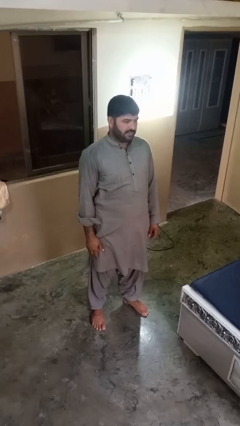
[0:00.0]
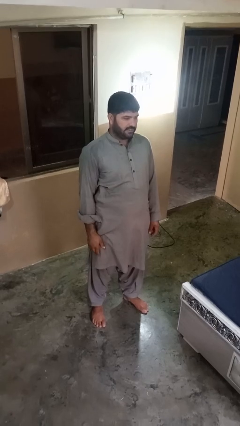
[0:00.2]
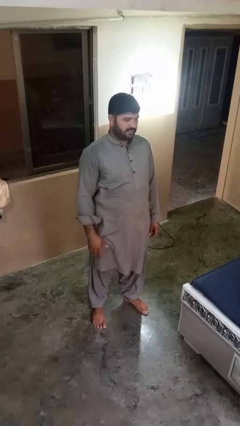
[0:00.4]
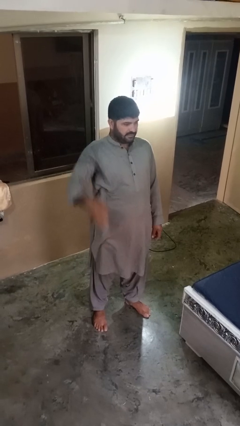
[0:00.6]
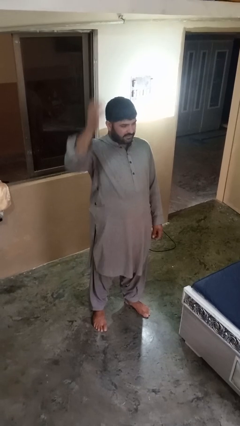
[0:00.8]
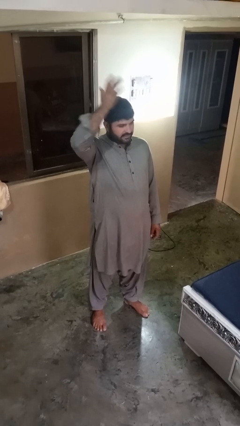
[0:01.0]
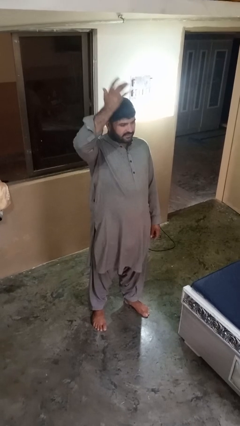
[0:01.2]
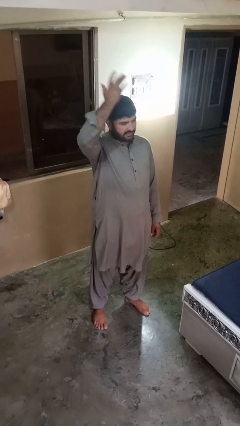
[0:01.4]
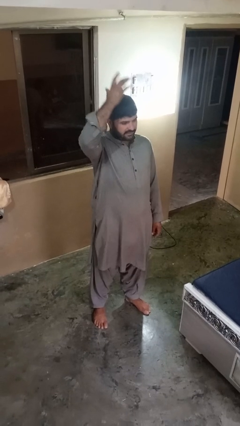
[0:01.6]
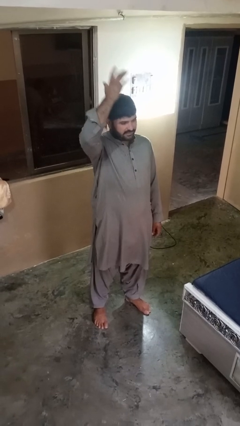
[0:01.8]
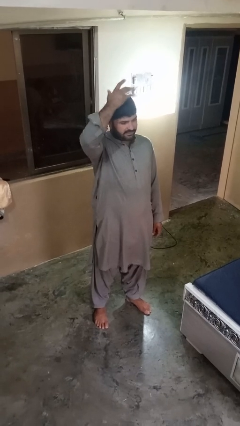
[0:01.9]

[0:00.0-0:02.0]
person pats head

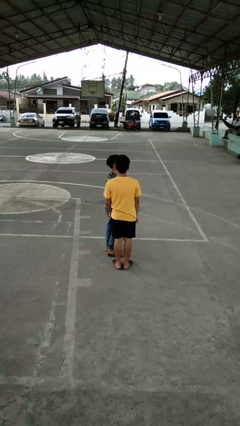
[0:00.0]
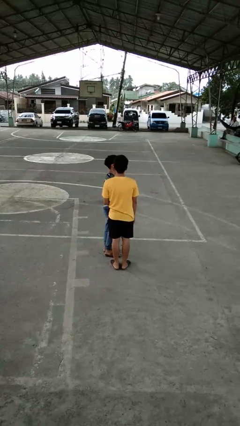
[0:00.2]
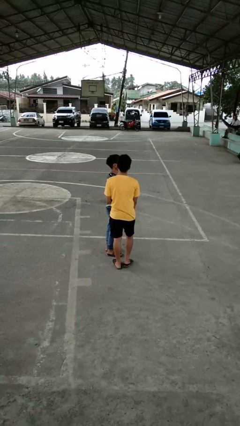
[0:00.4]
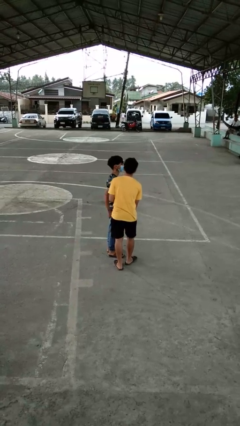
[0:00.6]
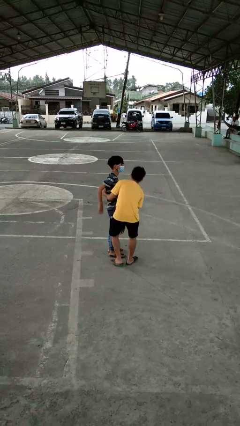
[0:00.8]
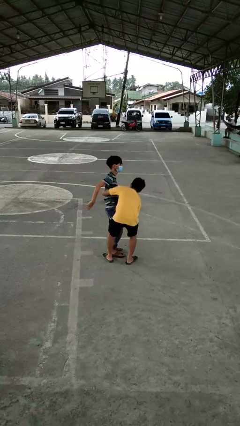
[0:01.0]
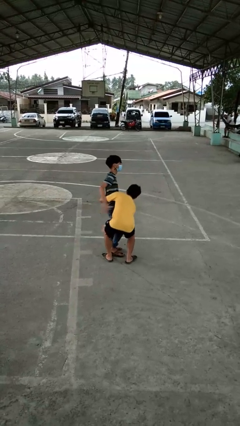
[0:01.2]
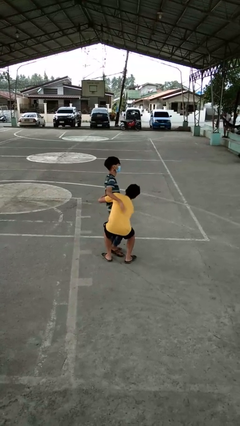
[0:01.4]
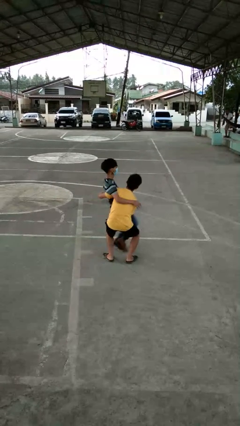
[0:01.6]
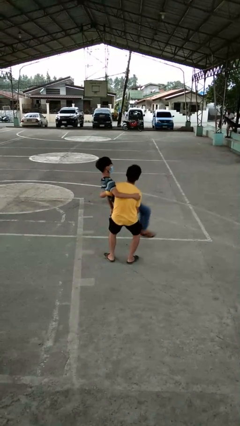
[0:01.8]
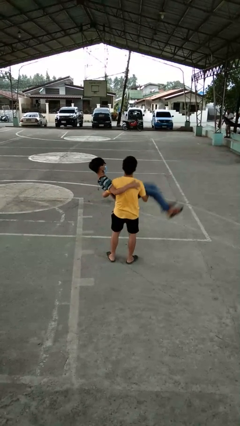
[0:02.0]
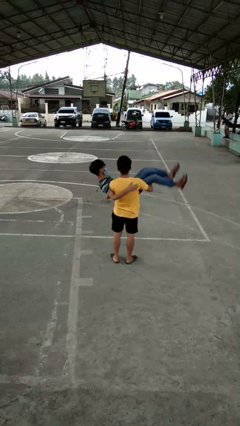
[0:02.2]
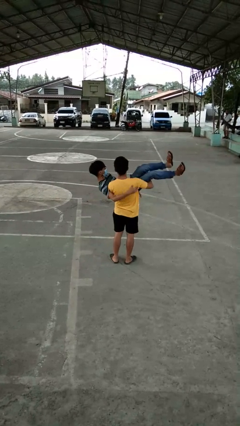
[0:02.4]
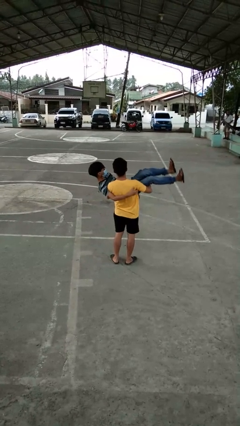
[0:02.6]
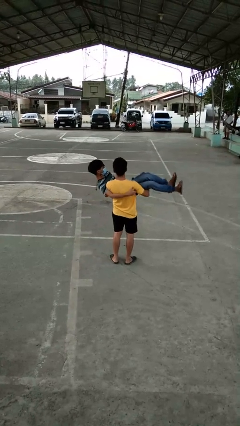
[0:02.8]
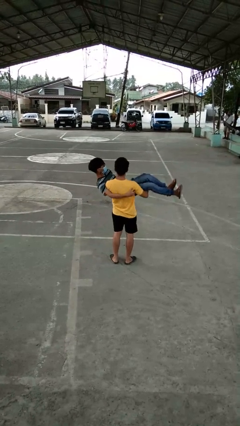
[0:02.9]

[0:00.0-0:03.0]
person picks up person

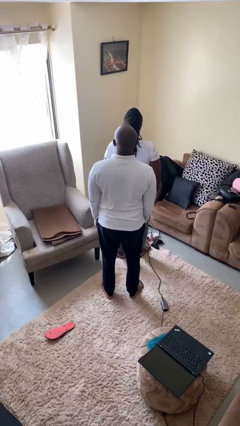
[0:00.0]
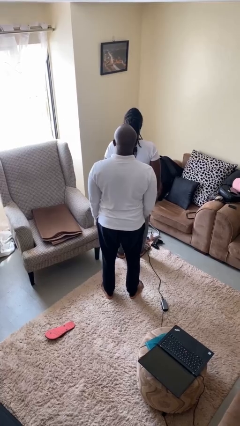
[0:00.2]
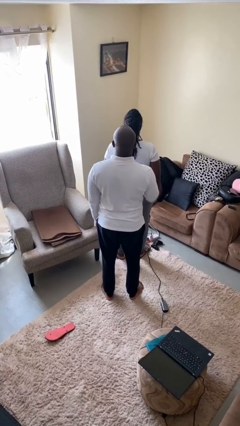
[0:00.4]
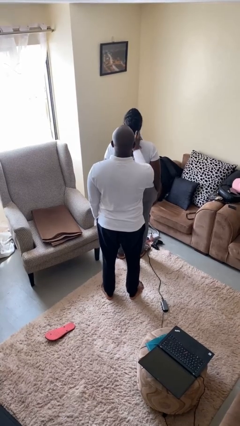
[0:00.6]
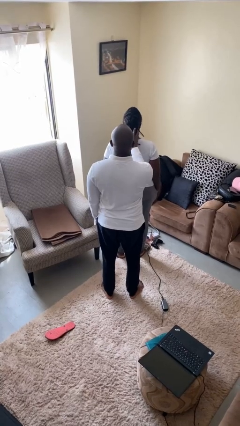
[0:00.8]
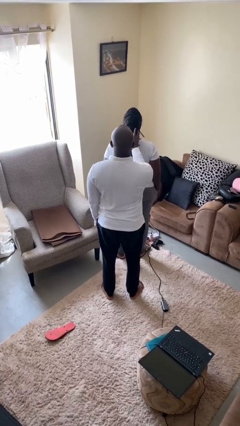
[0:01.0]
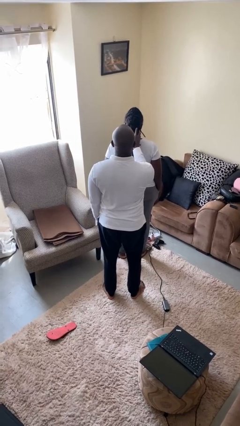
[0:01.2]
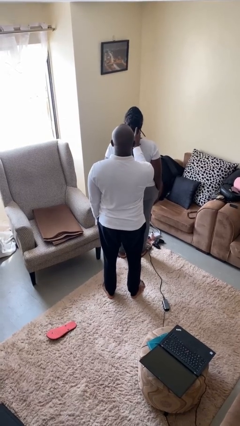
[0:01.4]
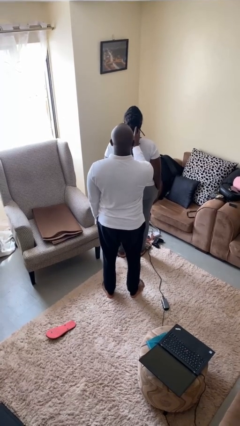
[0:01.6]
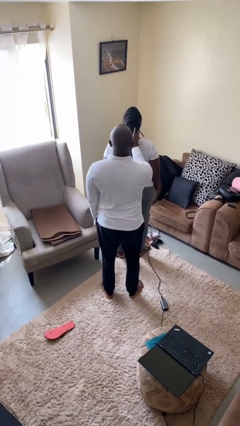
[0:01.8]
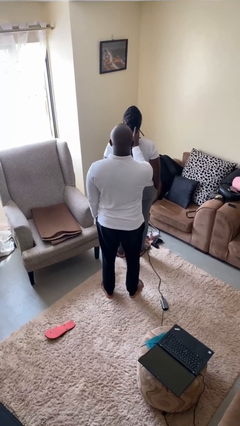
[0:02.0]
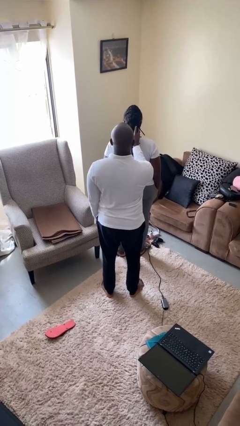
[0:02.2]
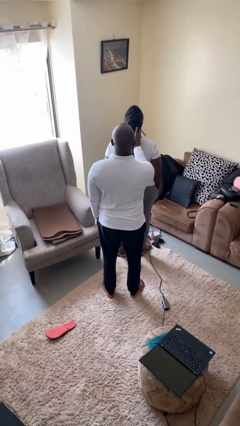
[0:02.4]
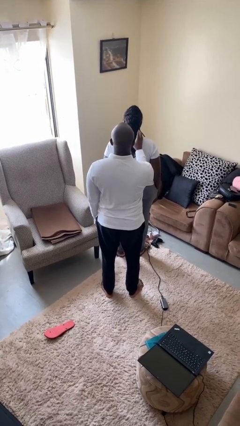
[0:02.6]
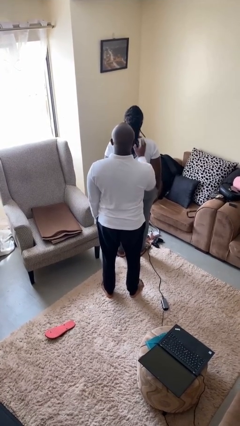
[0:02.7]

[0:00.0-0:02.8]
person grabs person by hair

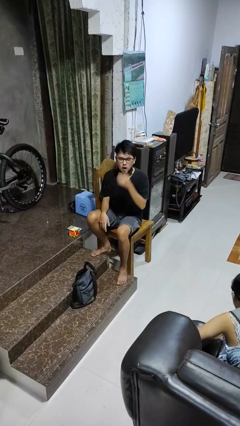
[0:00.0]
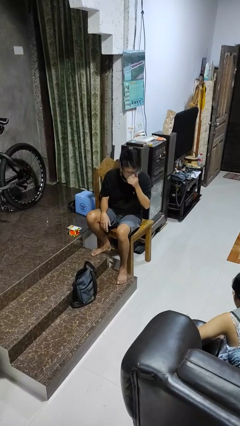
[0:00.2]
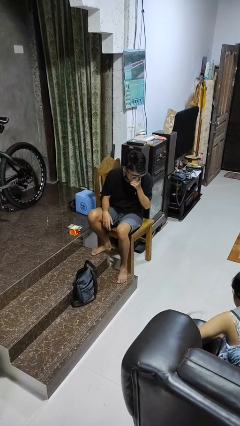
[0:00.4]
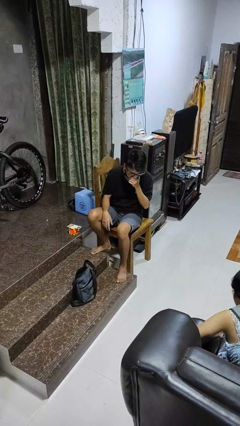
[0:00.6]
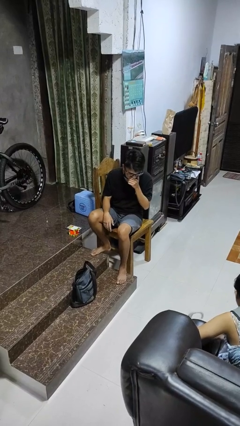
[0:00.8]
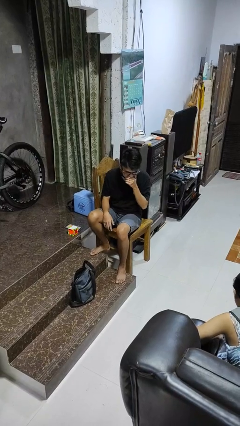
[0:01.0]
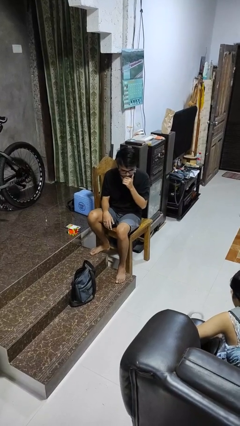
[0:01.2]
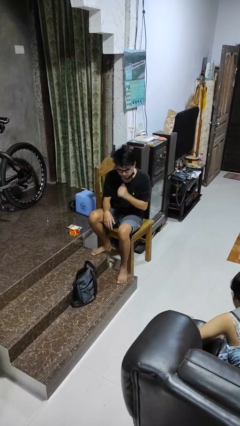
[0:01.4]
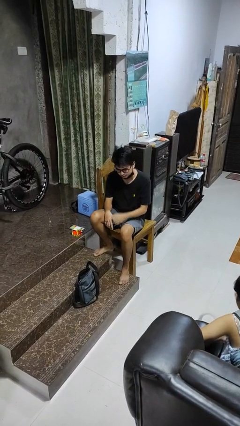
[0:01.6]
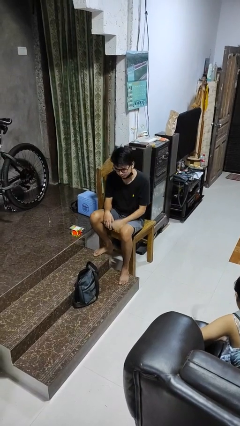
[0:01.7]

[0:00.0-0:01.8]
person sneezes into hand

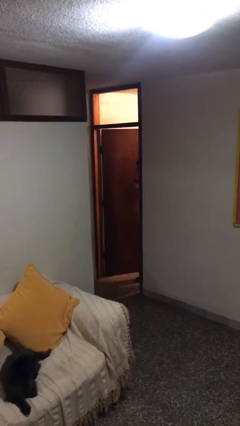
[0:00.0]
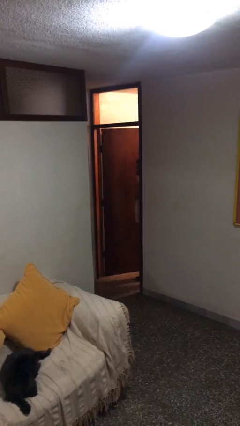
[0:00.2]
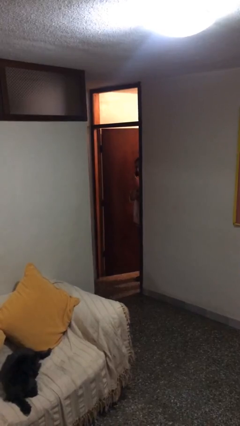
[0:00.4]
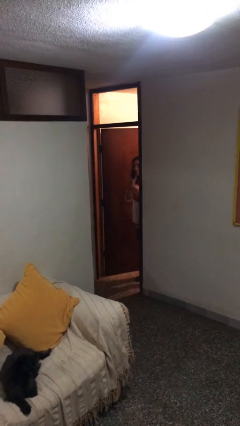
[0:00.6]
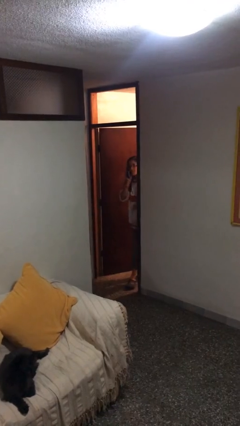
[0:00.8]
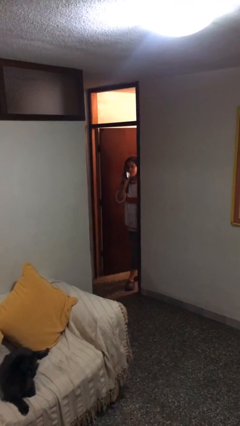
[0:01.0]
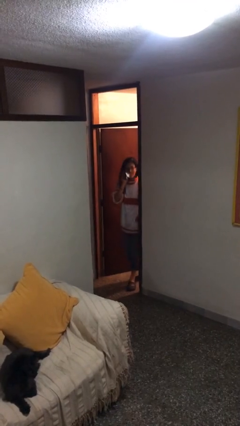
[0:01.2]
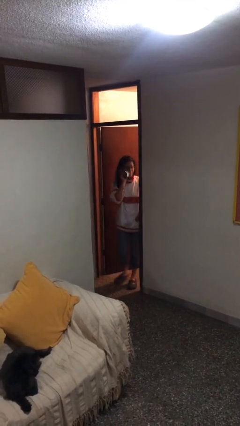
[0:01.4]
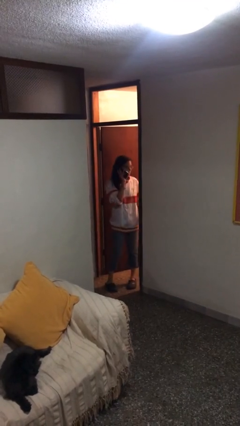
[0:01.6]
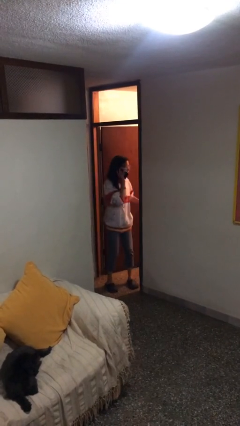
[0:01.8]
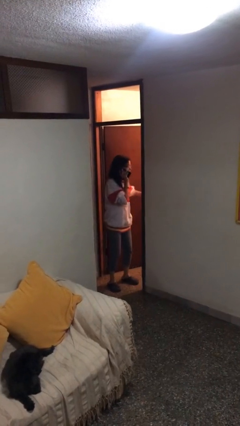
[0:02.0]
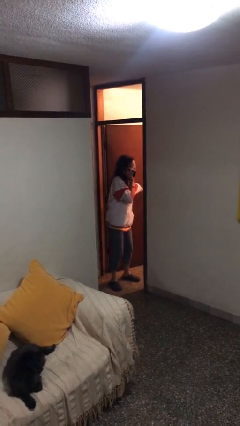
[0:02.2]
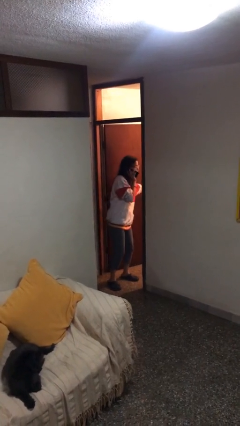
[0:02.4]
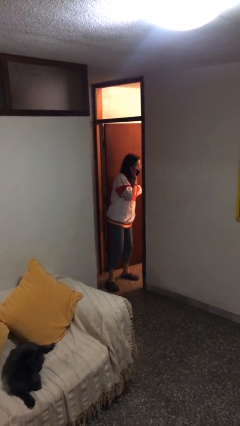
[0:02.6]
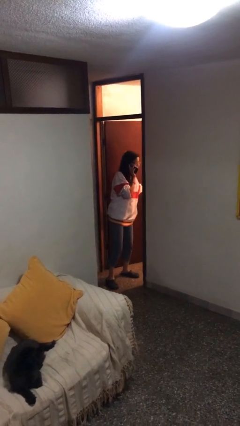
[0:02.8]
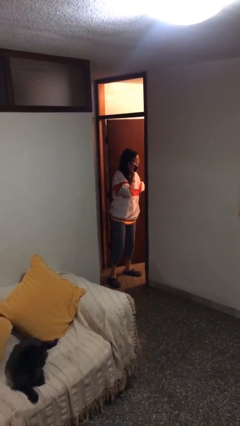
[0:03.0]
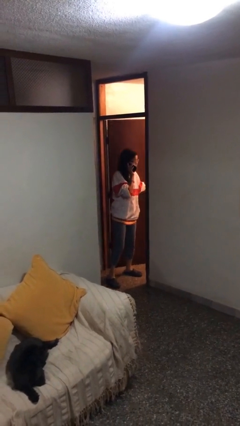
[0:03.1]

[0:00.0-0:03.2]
person enters scene through structure

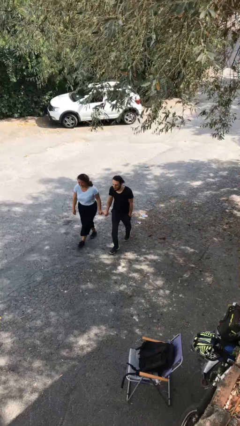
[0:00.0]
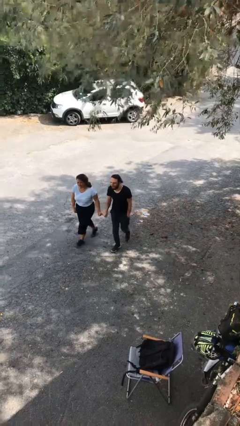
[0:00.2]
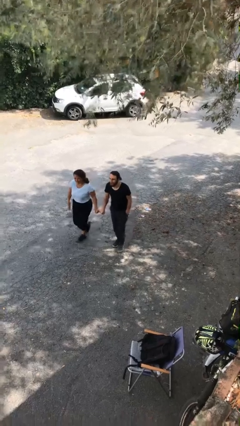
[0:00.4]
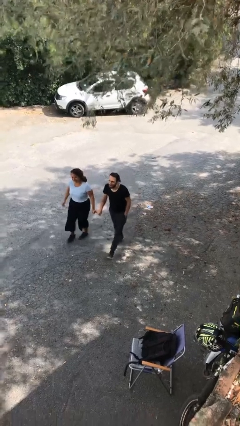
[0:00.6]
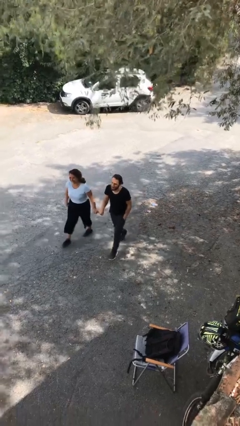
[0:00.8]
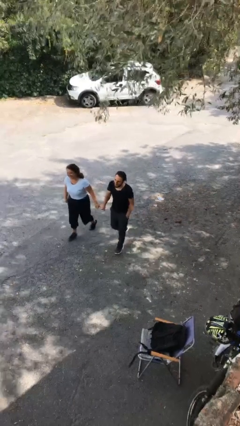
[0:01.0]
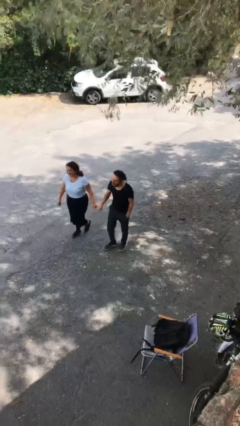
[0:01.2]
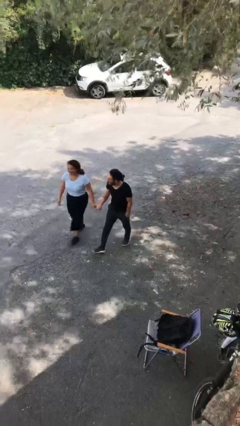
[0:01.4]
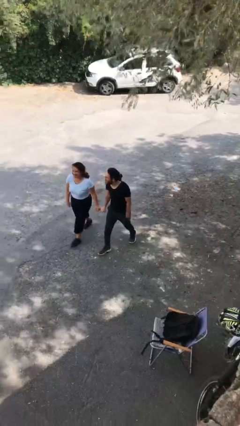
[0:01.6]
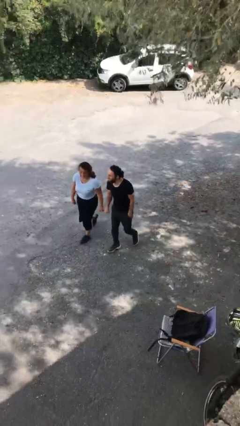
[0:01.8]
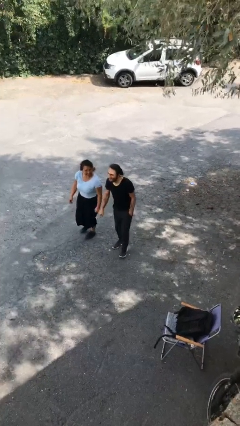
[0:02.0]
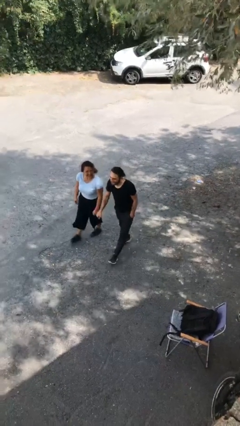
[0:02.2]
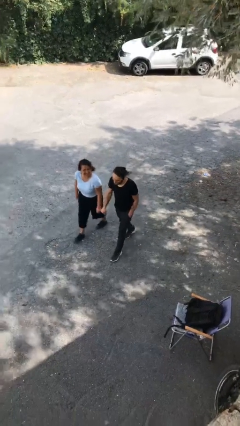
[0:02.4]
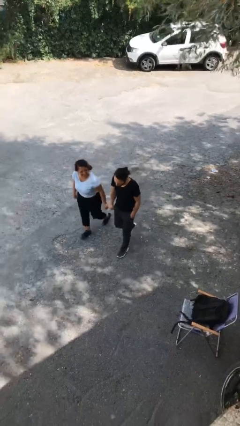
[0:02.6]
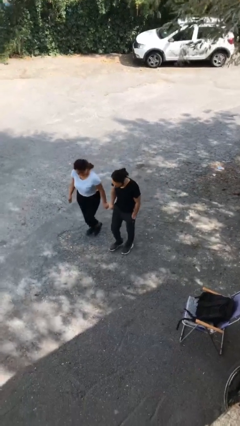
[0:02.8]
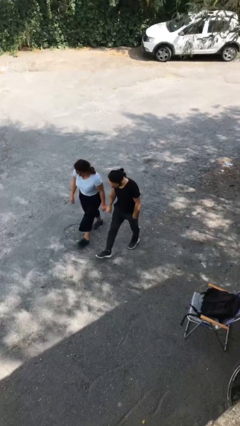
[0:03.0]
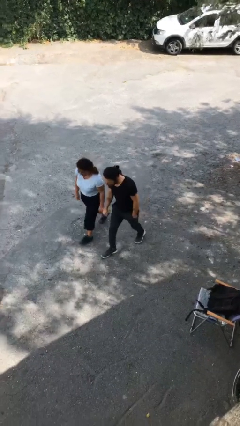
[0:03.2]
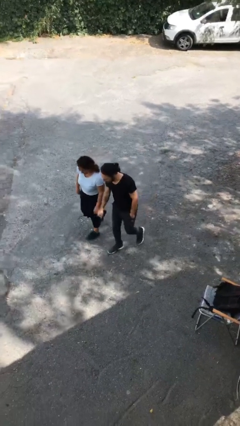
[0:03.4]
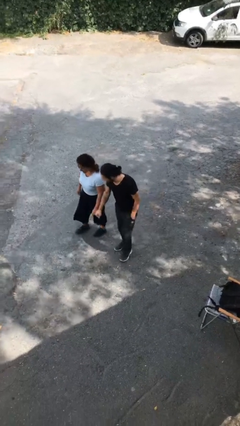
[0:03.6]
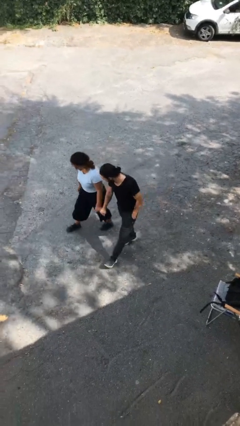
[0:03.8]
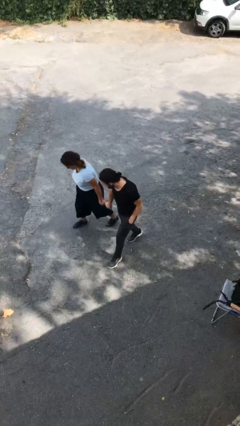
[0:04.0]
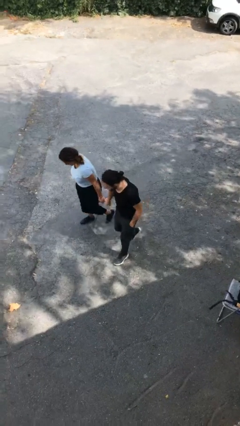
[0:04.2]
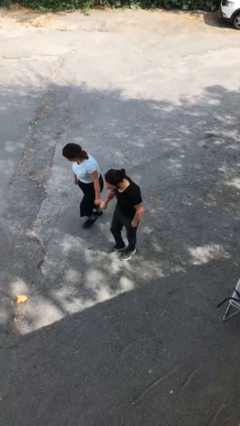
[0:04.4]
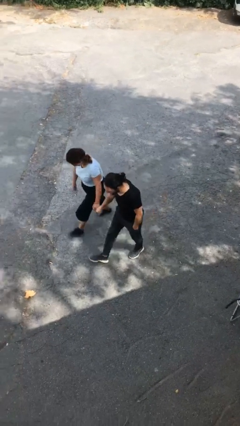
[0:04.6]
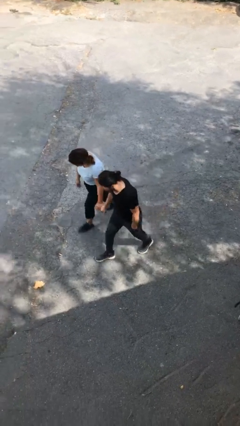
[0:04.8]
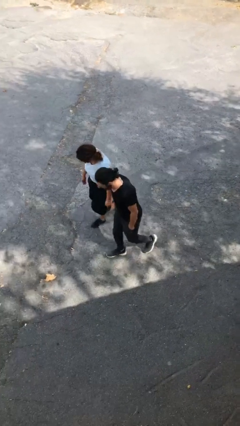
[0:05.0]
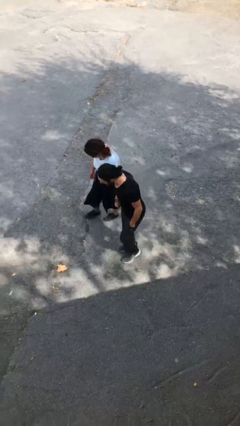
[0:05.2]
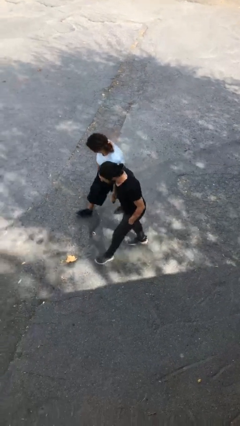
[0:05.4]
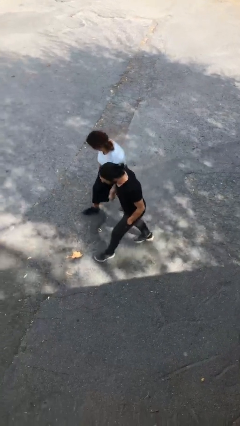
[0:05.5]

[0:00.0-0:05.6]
person holds hand
